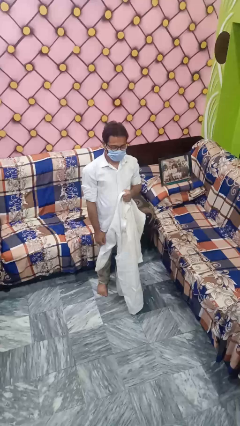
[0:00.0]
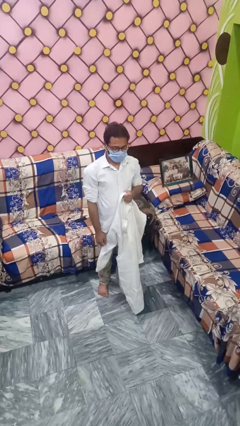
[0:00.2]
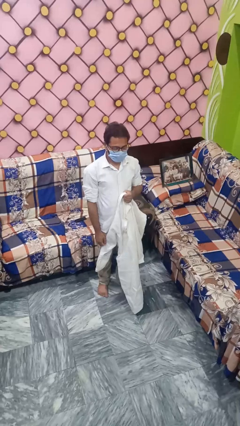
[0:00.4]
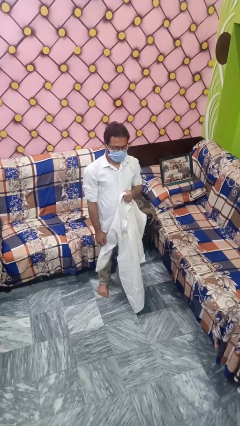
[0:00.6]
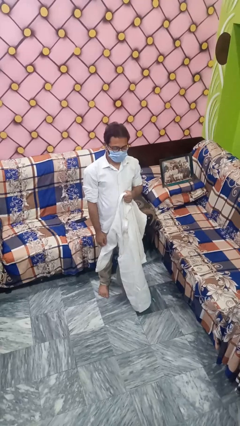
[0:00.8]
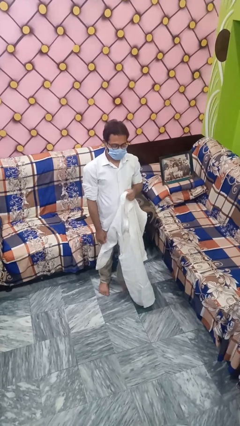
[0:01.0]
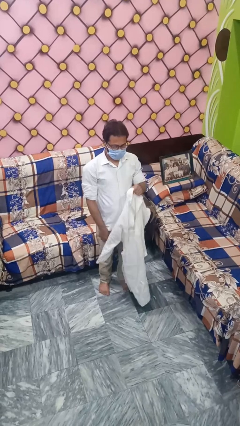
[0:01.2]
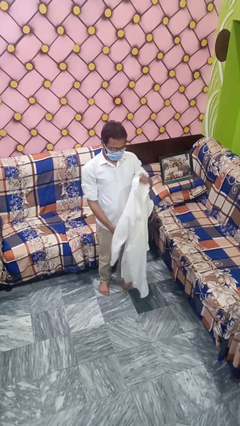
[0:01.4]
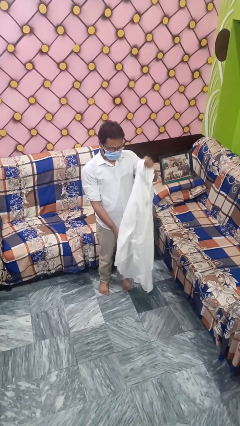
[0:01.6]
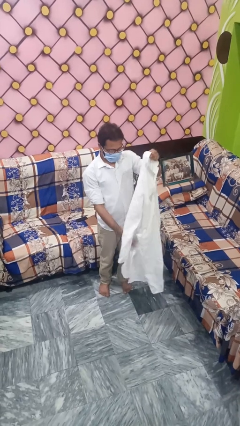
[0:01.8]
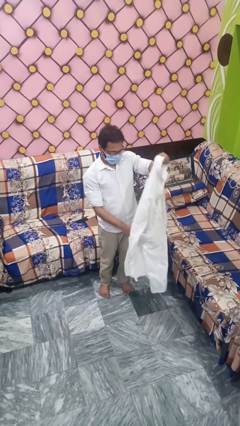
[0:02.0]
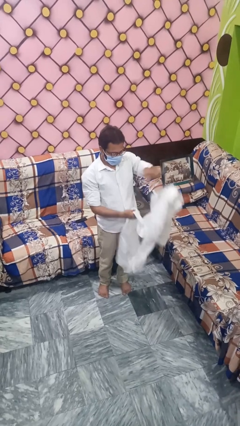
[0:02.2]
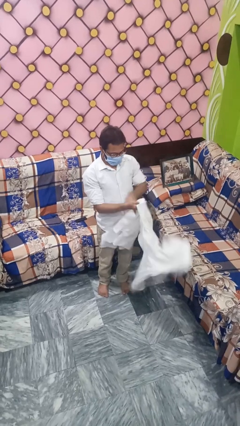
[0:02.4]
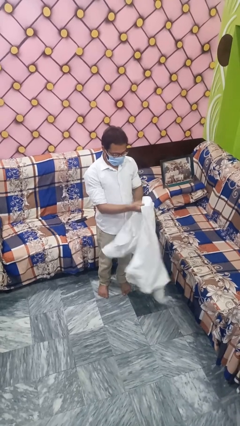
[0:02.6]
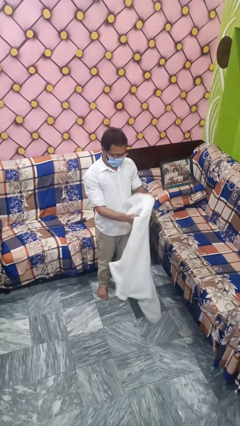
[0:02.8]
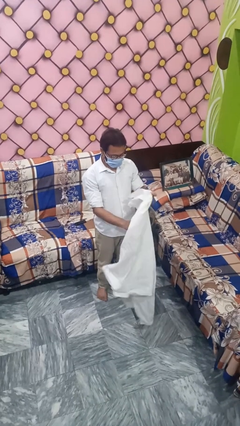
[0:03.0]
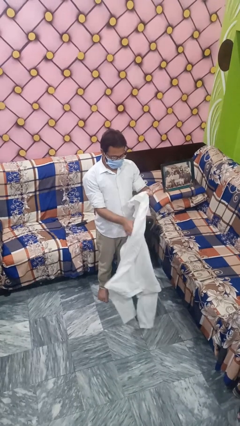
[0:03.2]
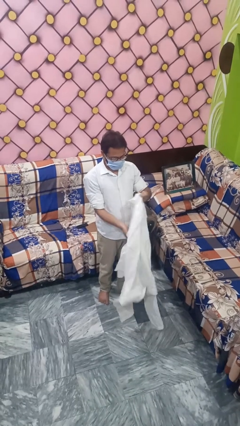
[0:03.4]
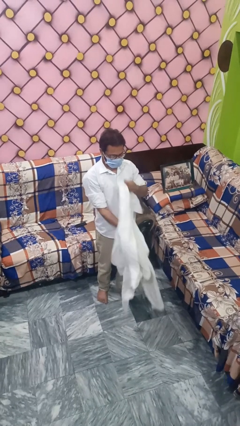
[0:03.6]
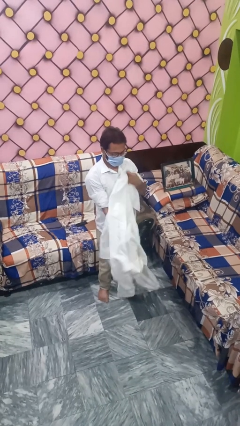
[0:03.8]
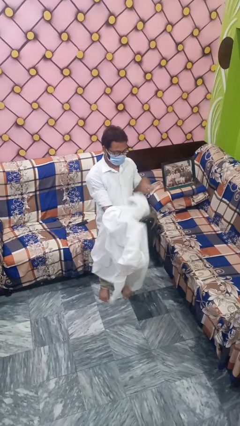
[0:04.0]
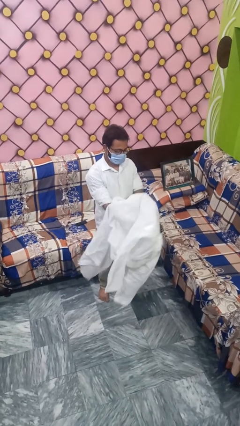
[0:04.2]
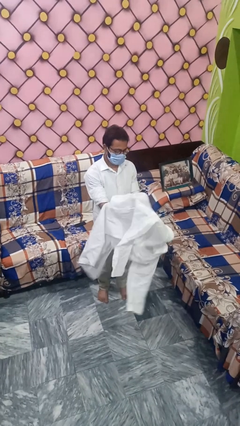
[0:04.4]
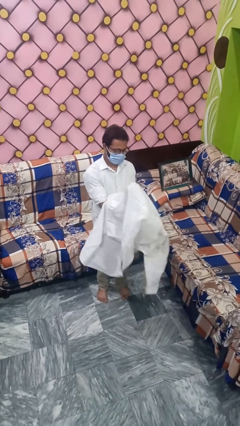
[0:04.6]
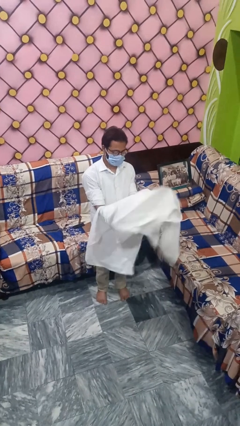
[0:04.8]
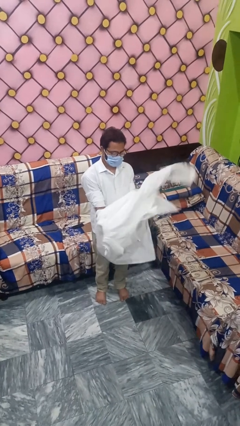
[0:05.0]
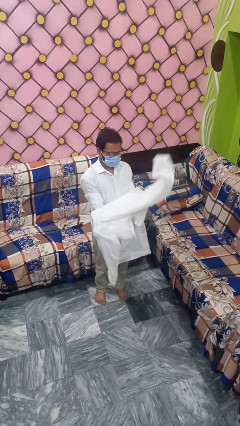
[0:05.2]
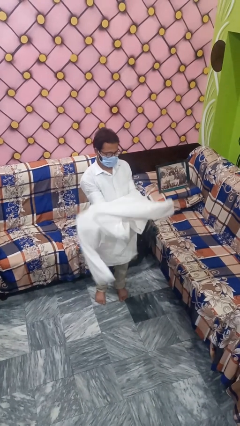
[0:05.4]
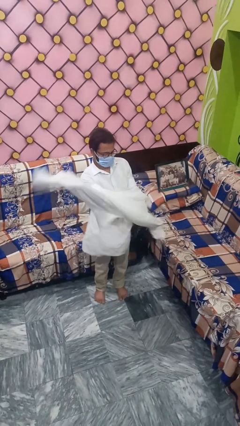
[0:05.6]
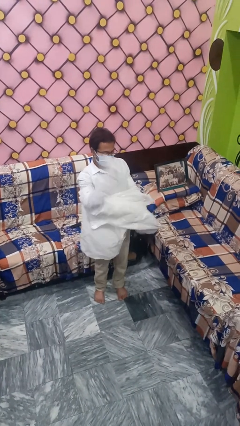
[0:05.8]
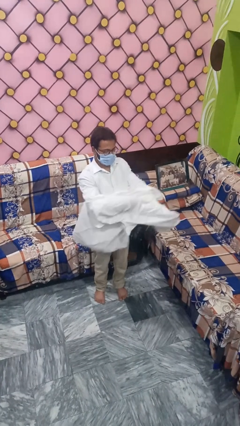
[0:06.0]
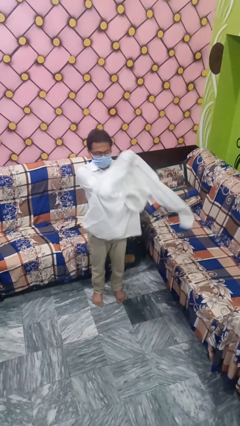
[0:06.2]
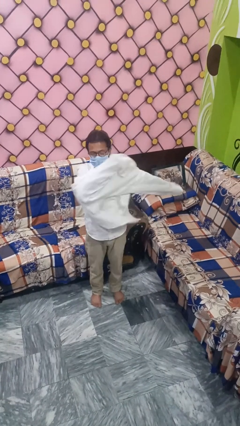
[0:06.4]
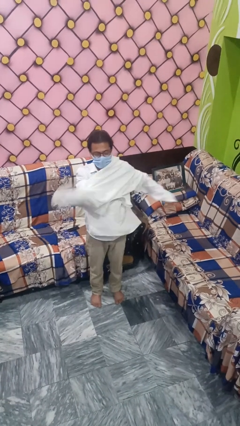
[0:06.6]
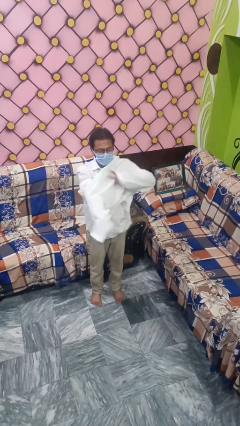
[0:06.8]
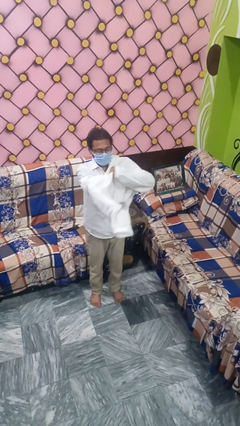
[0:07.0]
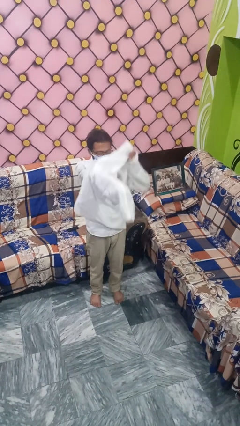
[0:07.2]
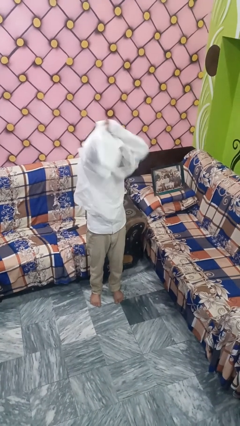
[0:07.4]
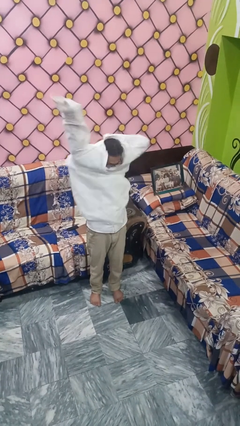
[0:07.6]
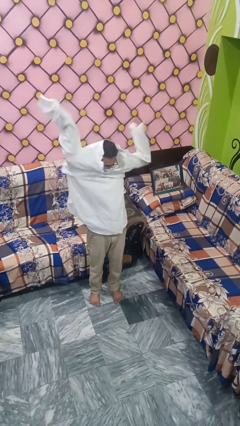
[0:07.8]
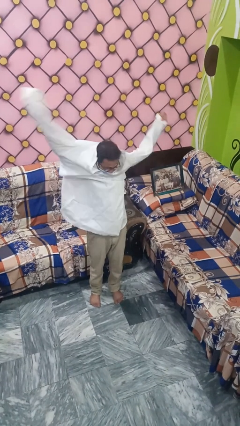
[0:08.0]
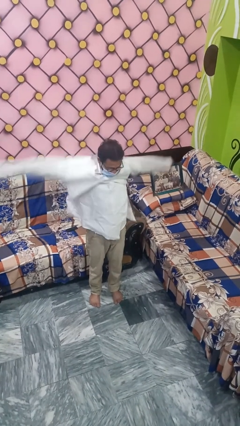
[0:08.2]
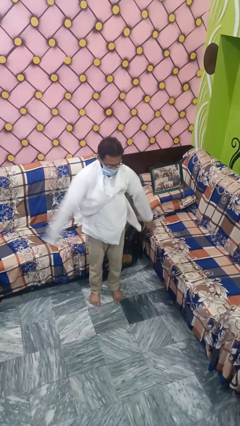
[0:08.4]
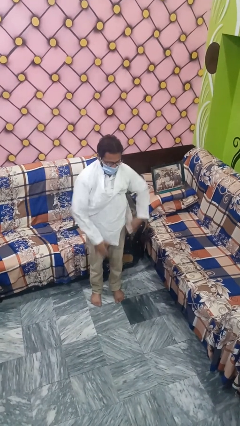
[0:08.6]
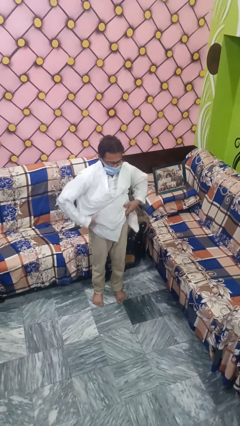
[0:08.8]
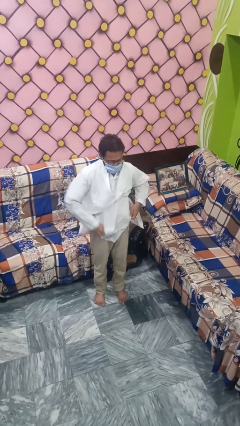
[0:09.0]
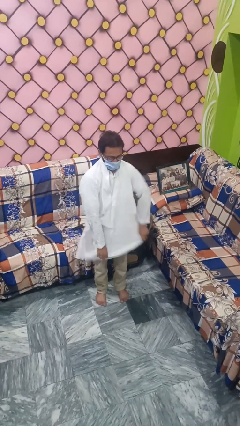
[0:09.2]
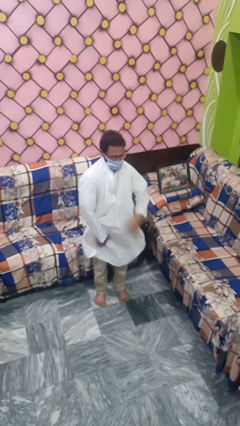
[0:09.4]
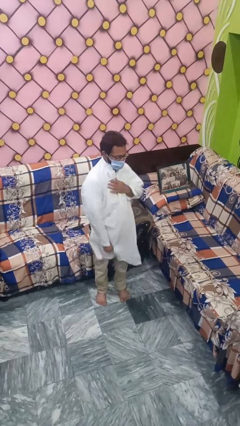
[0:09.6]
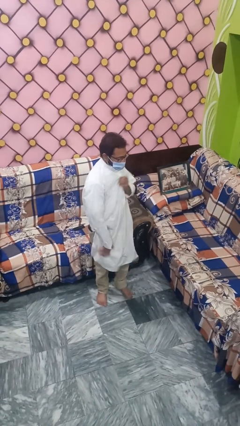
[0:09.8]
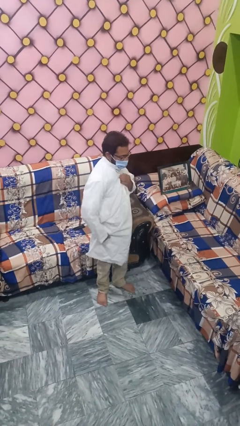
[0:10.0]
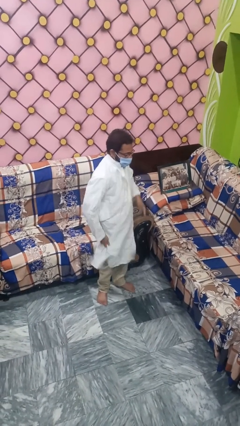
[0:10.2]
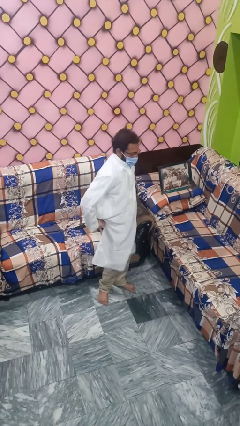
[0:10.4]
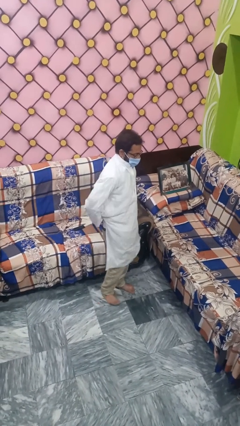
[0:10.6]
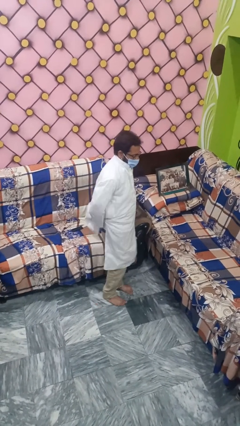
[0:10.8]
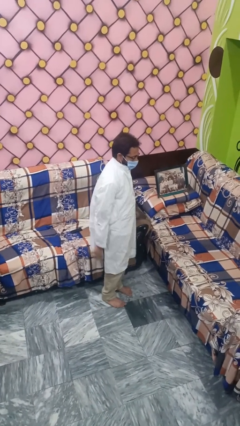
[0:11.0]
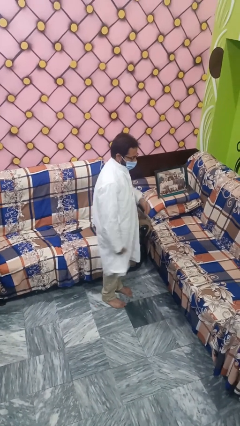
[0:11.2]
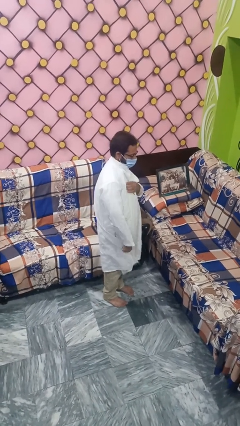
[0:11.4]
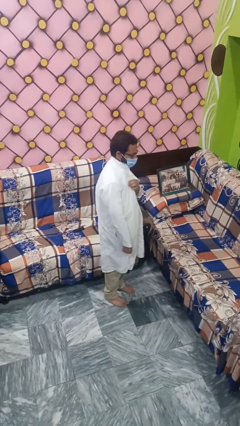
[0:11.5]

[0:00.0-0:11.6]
person puts on shirt

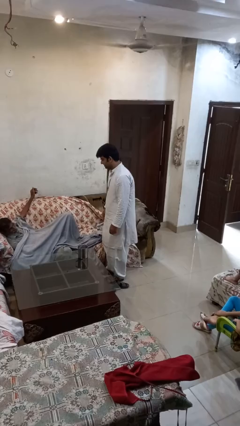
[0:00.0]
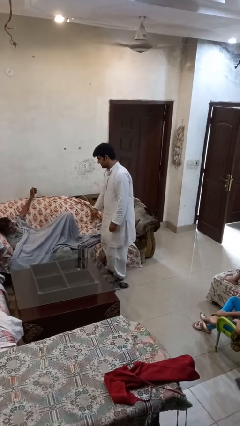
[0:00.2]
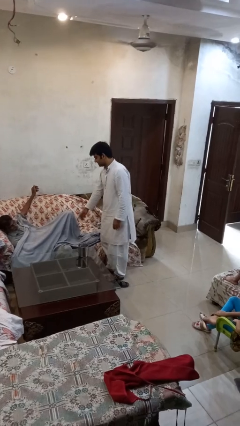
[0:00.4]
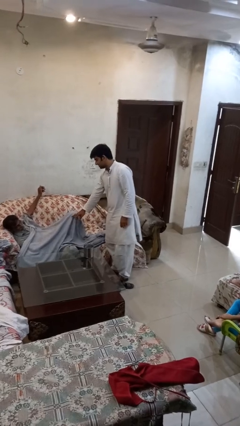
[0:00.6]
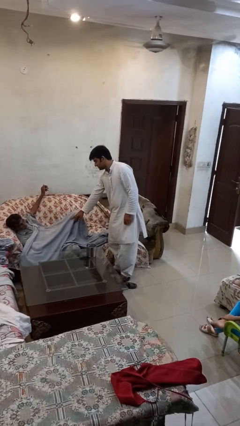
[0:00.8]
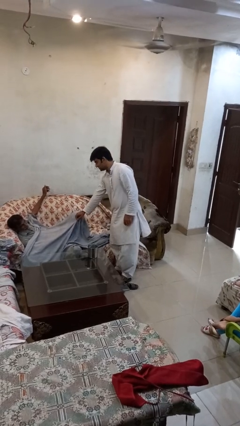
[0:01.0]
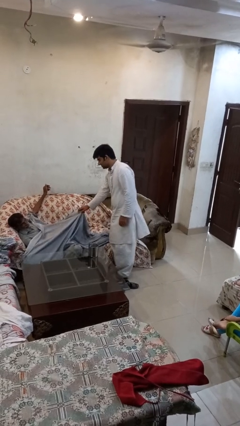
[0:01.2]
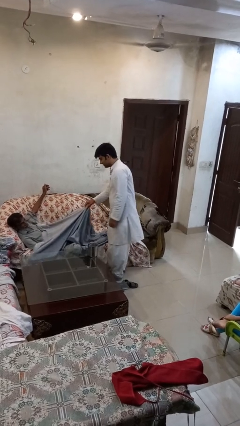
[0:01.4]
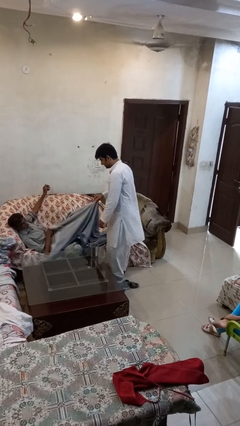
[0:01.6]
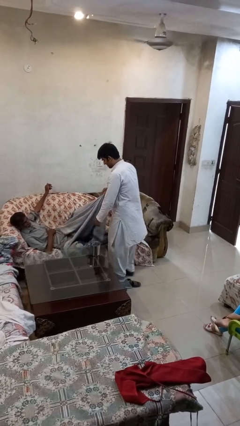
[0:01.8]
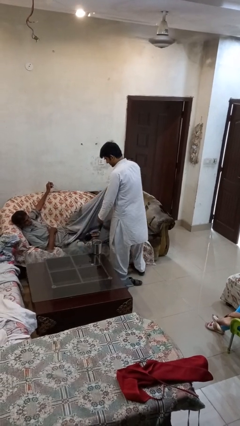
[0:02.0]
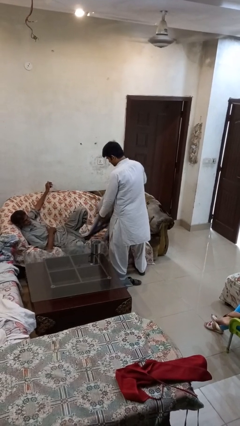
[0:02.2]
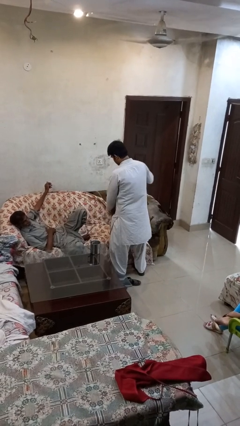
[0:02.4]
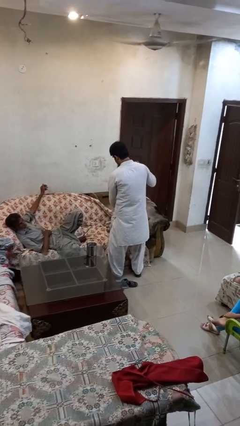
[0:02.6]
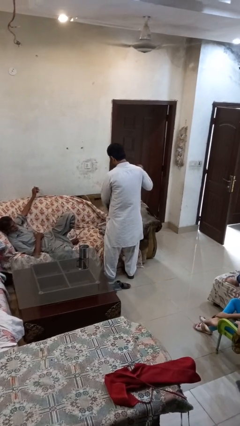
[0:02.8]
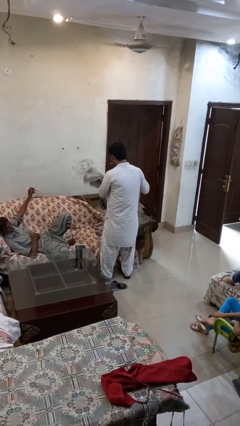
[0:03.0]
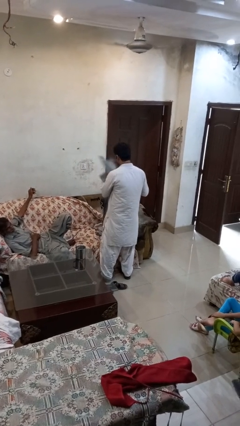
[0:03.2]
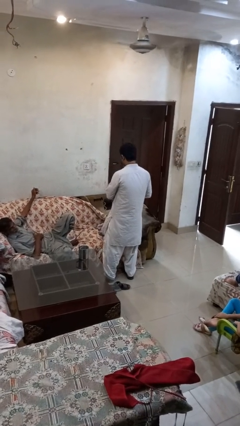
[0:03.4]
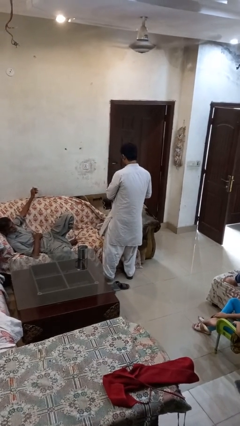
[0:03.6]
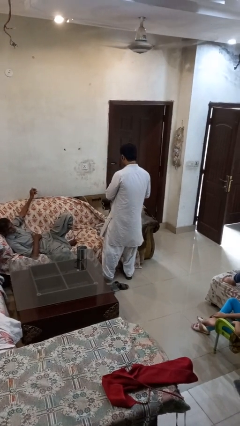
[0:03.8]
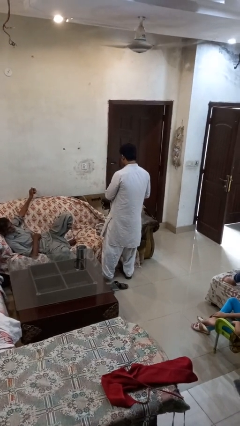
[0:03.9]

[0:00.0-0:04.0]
person uncovers friend with blanket

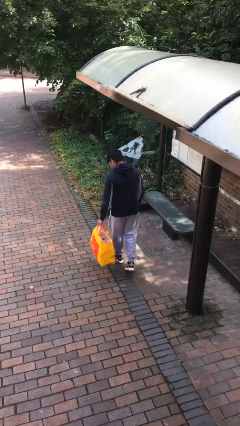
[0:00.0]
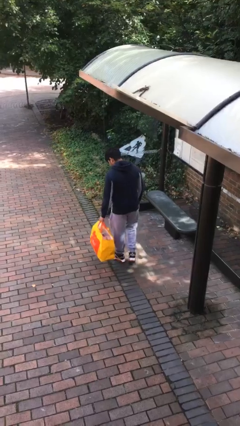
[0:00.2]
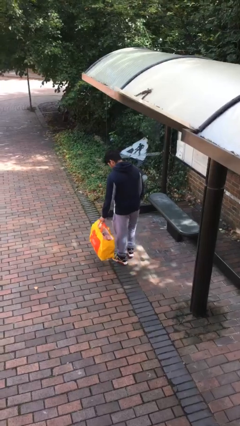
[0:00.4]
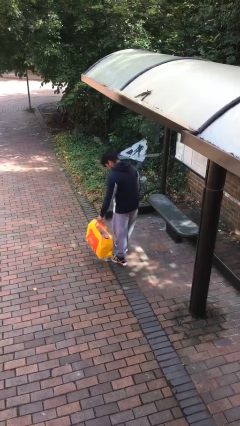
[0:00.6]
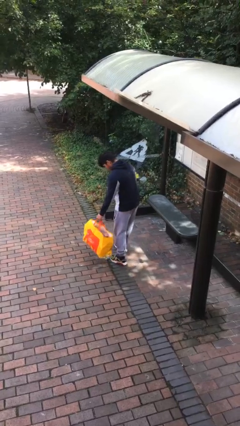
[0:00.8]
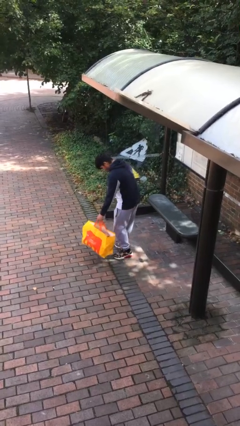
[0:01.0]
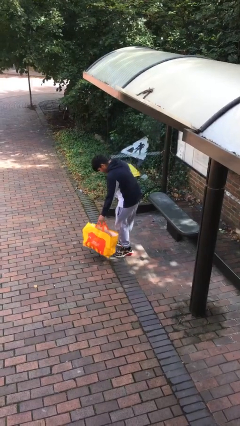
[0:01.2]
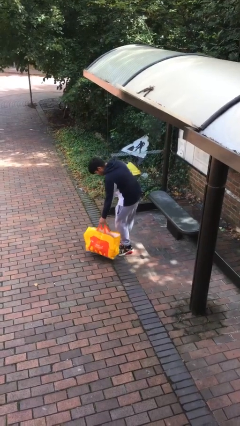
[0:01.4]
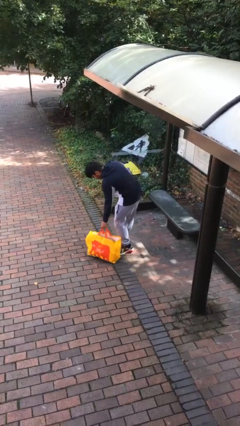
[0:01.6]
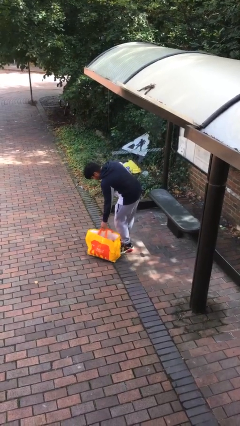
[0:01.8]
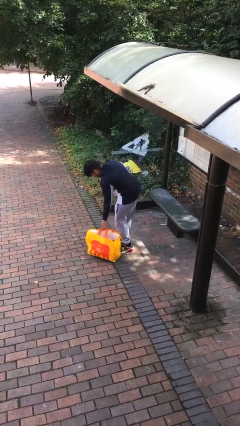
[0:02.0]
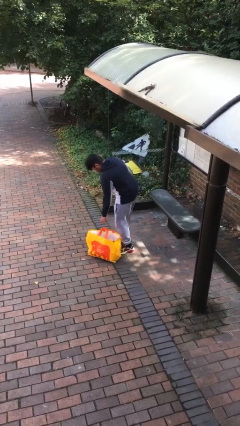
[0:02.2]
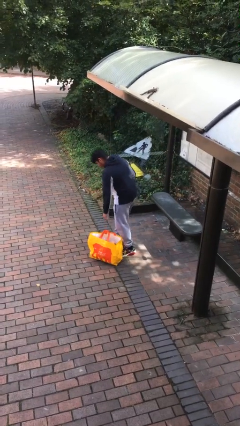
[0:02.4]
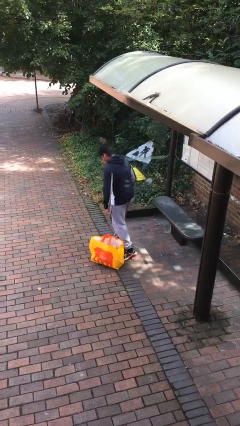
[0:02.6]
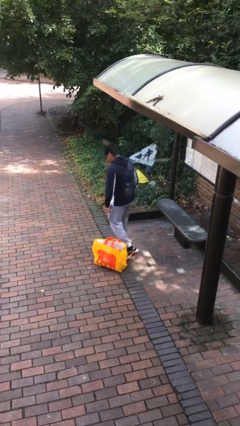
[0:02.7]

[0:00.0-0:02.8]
person puts down object on floor

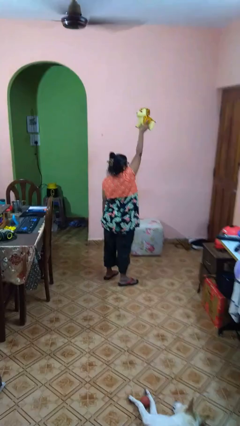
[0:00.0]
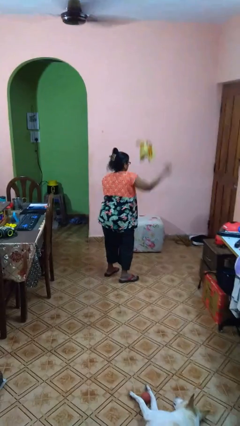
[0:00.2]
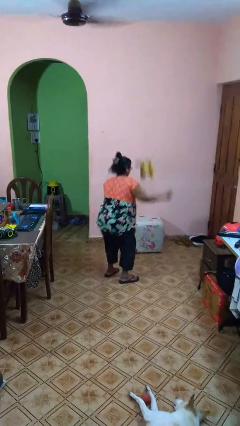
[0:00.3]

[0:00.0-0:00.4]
person drops object
